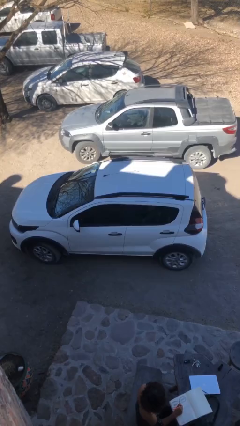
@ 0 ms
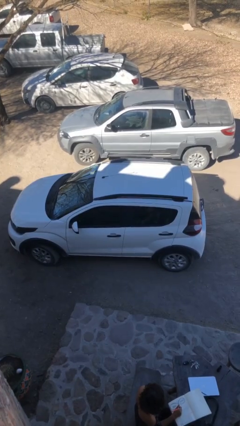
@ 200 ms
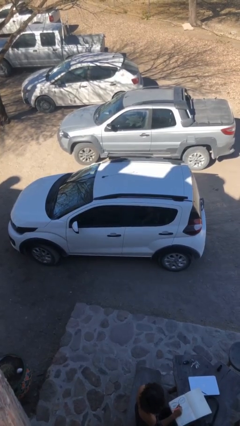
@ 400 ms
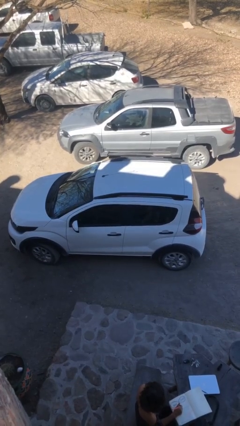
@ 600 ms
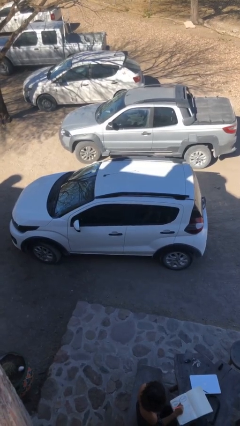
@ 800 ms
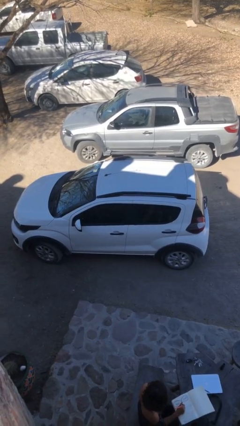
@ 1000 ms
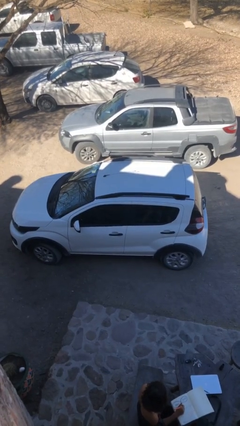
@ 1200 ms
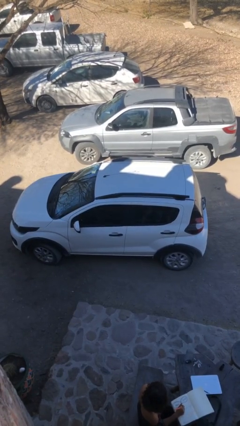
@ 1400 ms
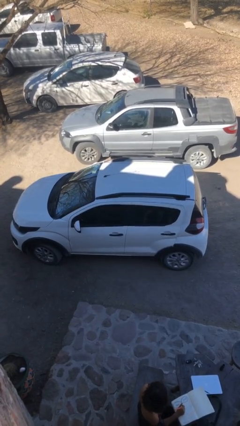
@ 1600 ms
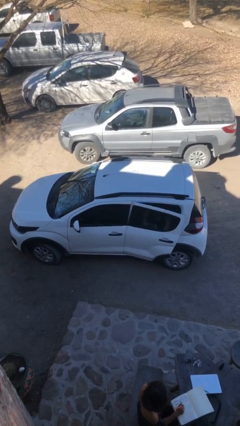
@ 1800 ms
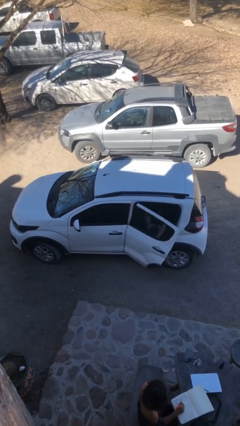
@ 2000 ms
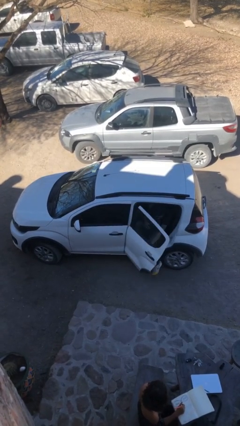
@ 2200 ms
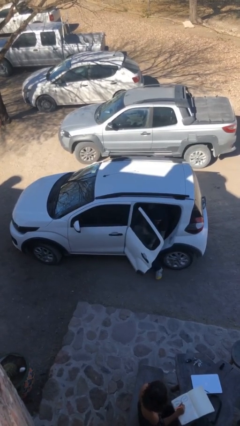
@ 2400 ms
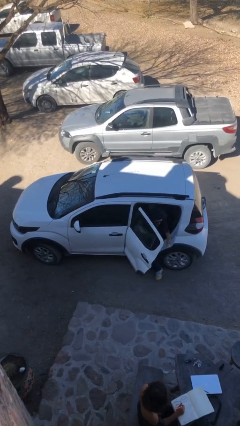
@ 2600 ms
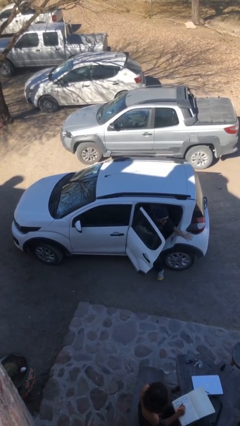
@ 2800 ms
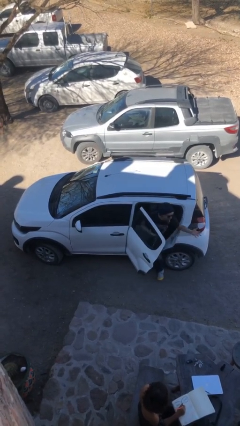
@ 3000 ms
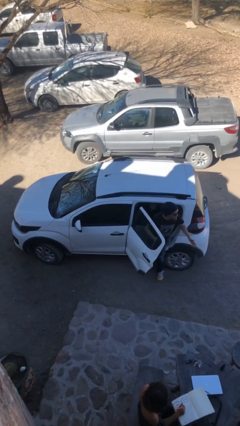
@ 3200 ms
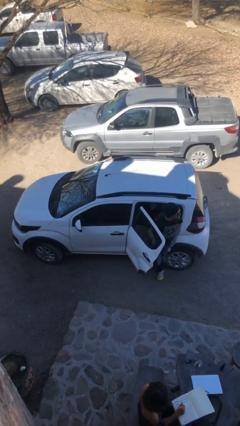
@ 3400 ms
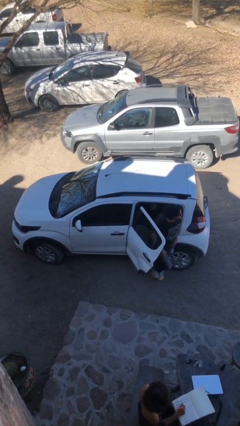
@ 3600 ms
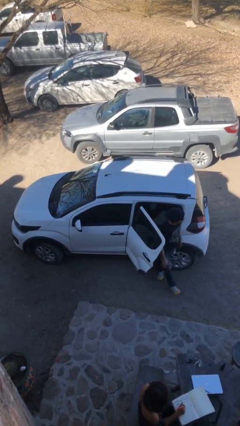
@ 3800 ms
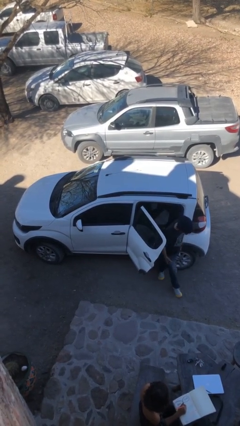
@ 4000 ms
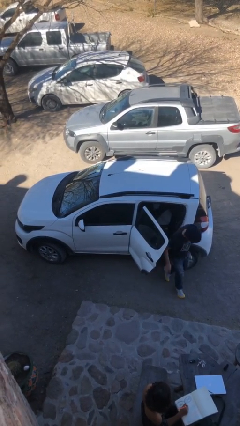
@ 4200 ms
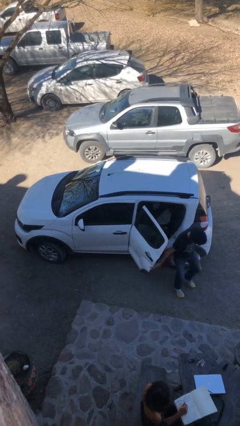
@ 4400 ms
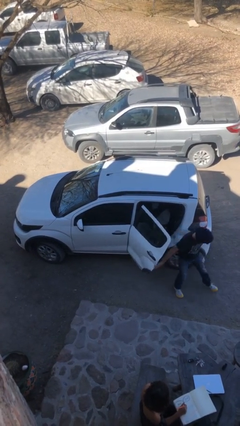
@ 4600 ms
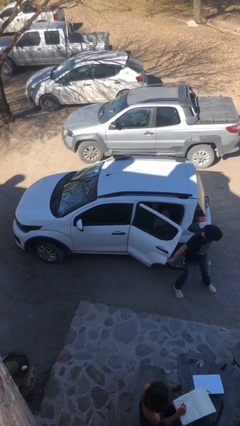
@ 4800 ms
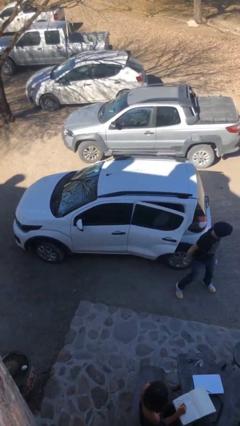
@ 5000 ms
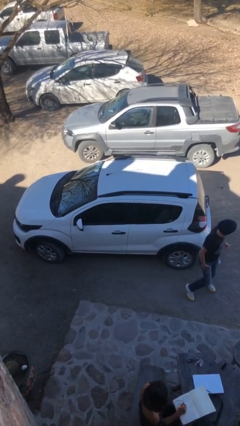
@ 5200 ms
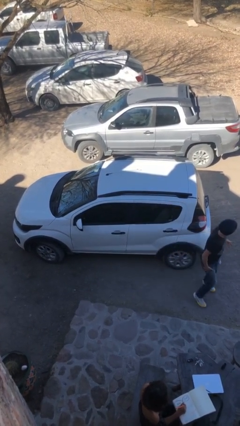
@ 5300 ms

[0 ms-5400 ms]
car drops off person

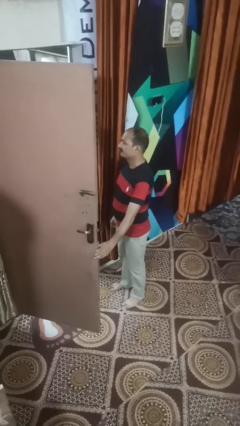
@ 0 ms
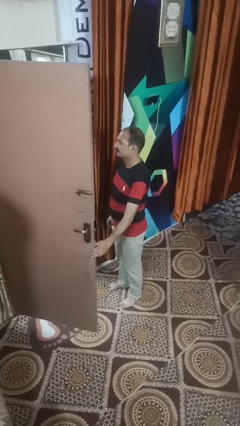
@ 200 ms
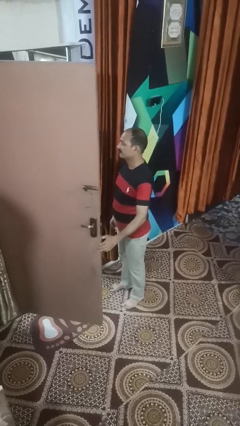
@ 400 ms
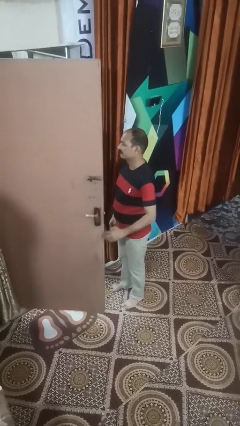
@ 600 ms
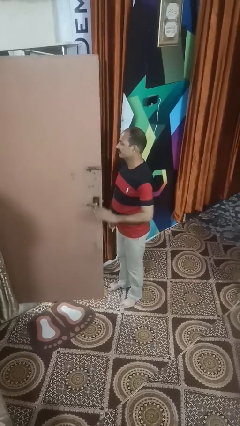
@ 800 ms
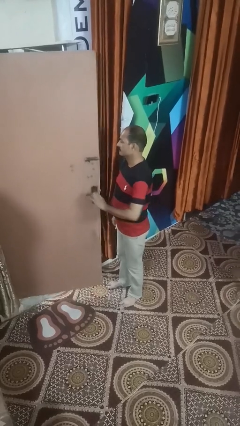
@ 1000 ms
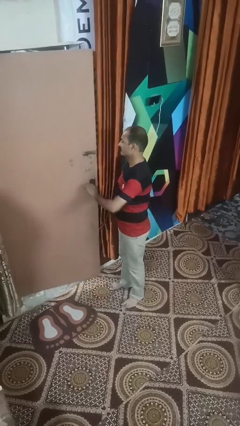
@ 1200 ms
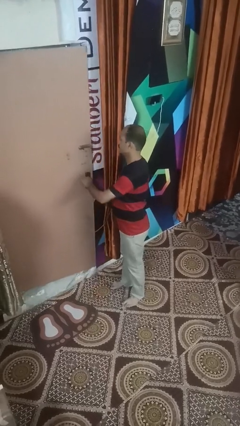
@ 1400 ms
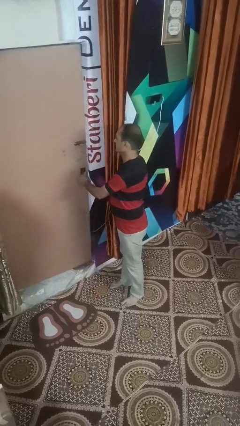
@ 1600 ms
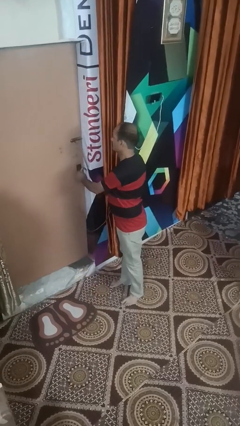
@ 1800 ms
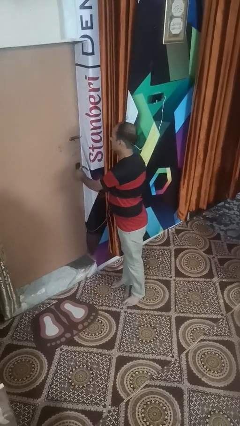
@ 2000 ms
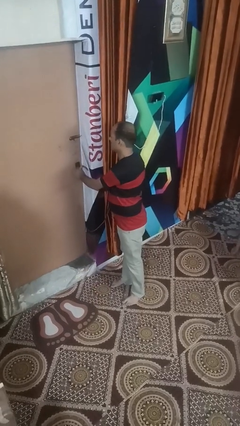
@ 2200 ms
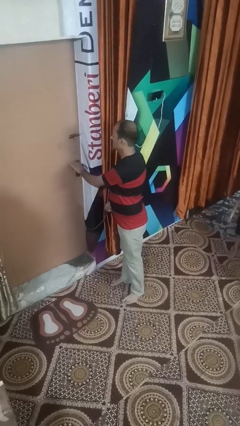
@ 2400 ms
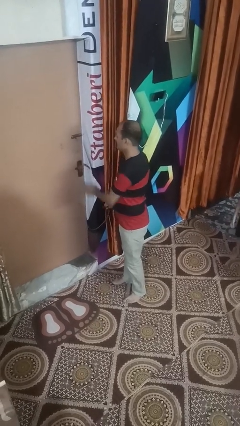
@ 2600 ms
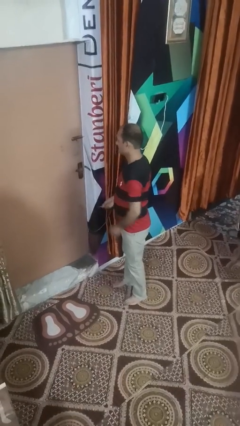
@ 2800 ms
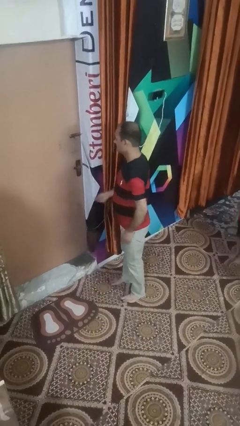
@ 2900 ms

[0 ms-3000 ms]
person closes facility door

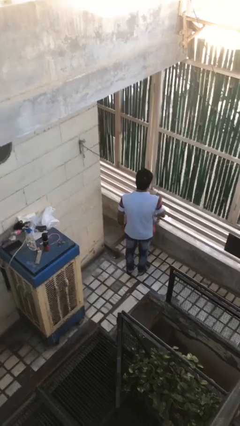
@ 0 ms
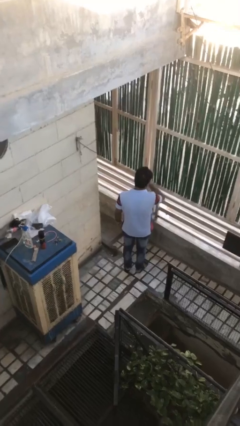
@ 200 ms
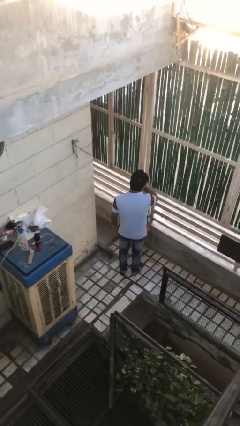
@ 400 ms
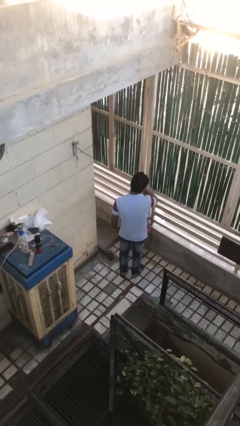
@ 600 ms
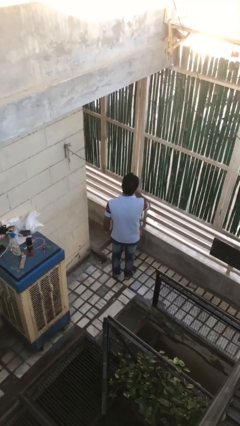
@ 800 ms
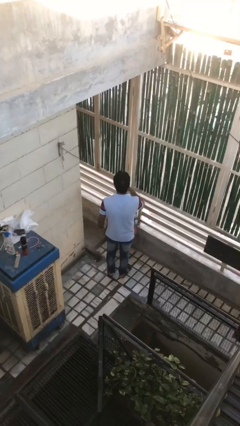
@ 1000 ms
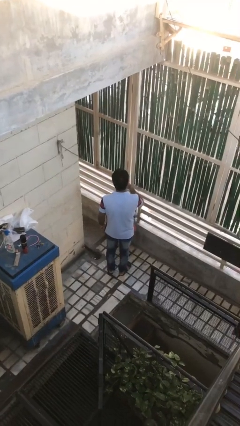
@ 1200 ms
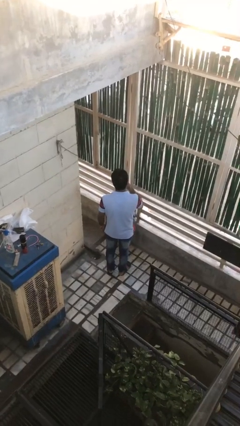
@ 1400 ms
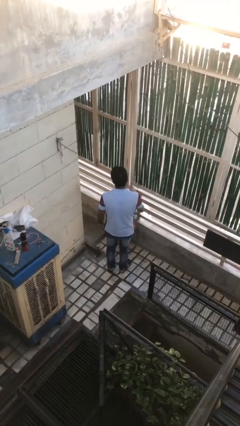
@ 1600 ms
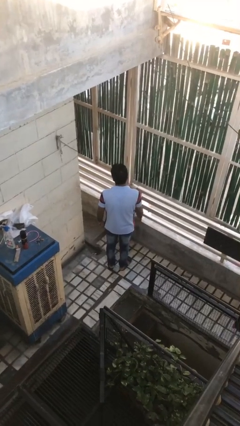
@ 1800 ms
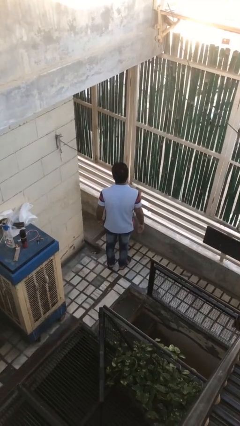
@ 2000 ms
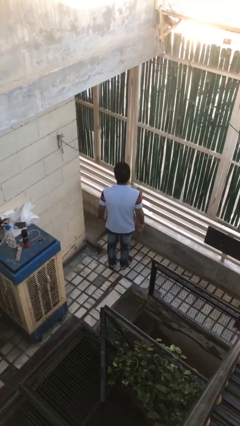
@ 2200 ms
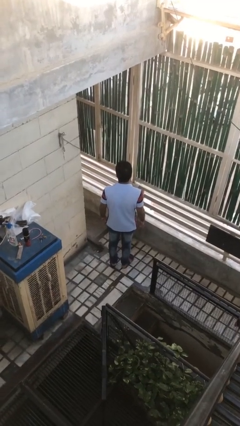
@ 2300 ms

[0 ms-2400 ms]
person licks fingers

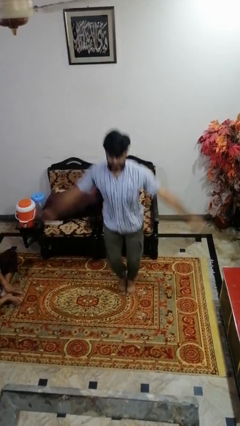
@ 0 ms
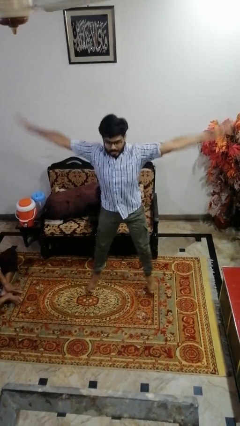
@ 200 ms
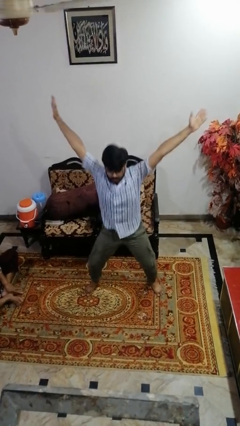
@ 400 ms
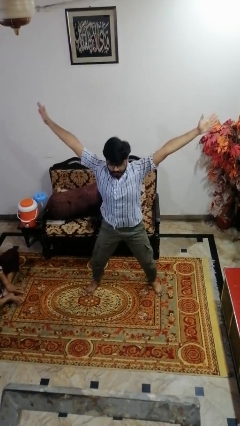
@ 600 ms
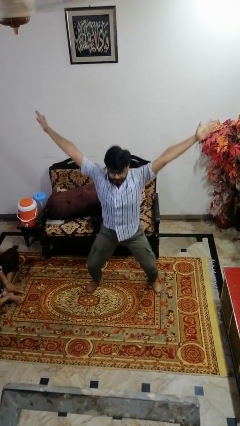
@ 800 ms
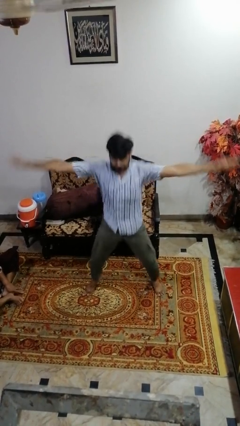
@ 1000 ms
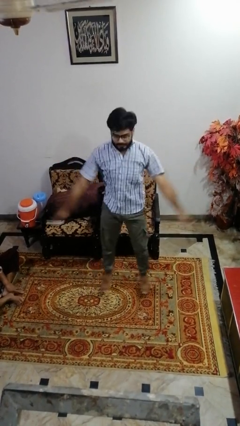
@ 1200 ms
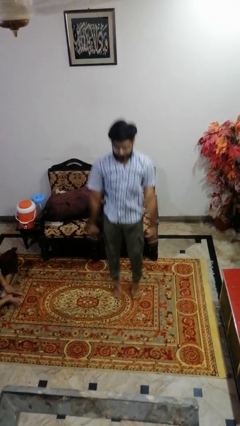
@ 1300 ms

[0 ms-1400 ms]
person exercises with jumping jacks

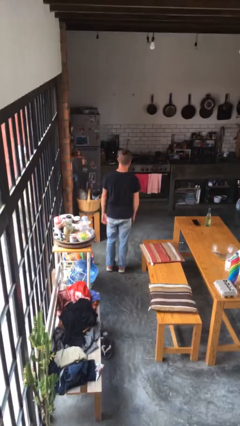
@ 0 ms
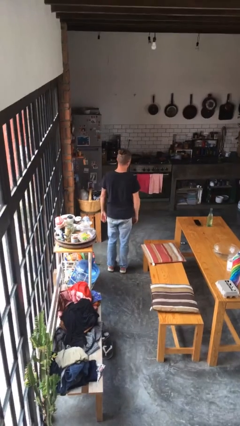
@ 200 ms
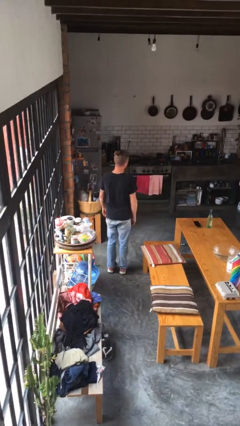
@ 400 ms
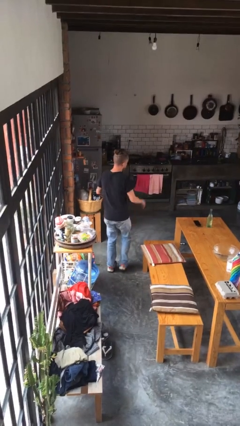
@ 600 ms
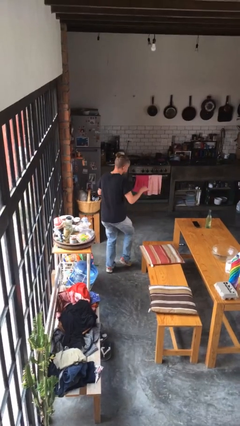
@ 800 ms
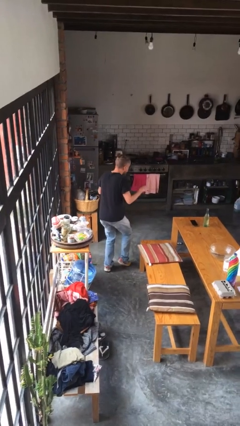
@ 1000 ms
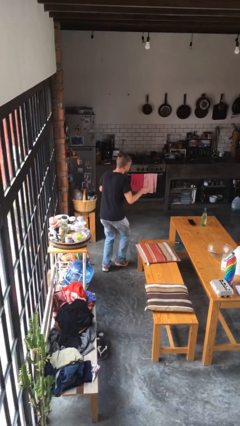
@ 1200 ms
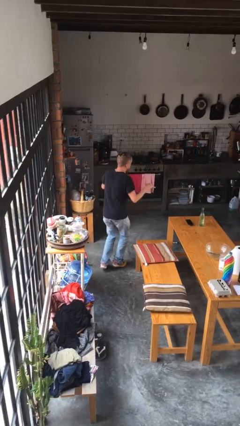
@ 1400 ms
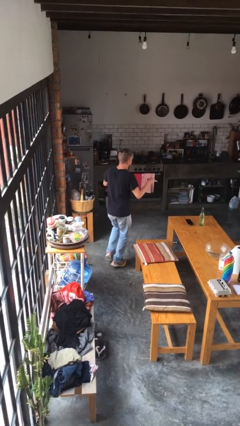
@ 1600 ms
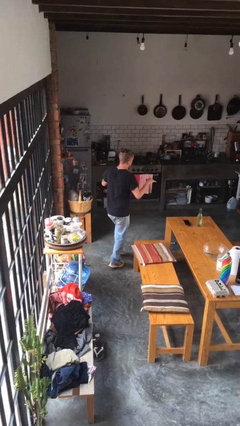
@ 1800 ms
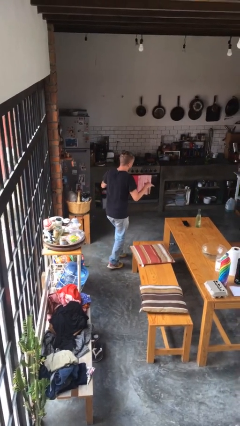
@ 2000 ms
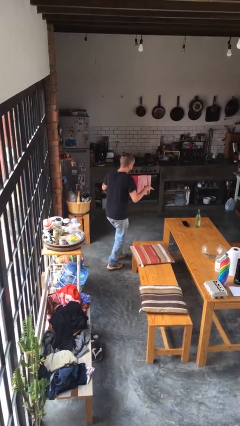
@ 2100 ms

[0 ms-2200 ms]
person walks tiptoe

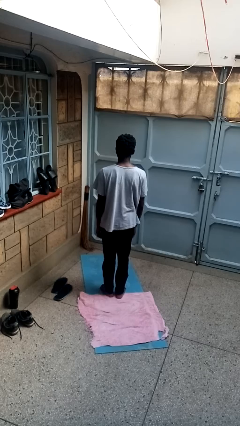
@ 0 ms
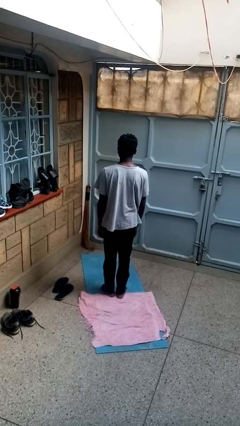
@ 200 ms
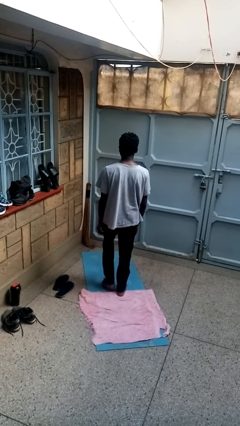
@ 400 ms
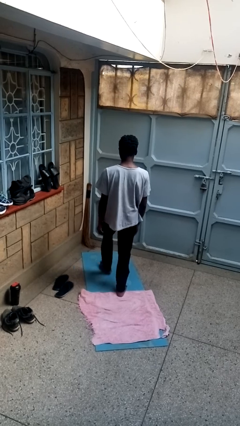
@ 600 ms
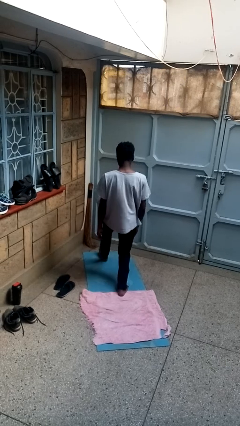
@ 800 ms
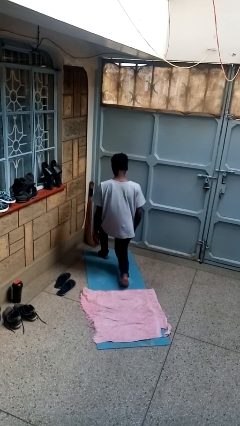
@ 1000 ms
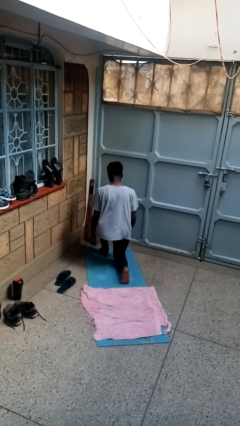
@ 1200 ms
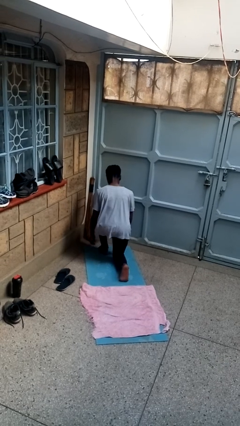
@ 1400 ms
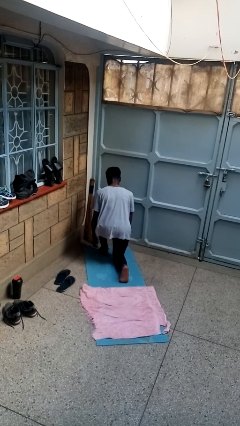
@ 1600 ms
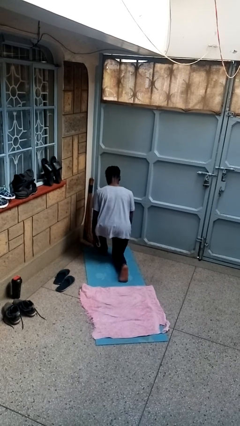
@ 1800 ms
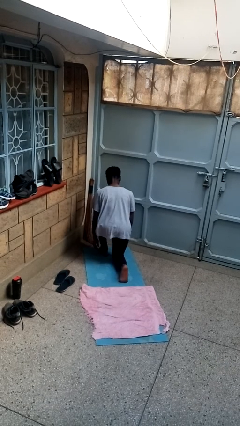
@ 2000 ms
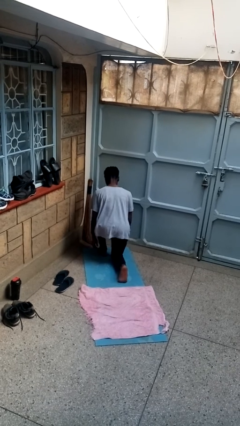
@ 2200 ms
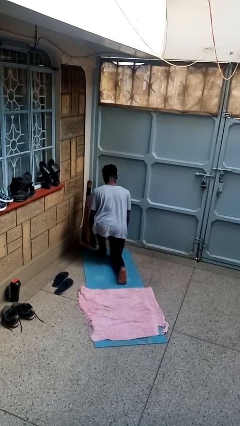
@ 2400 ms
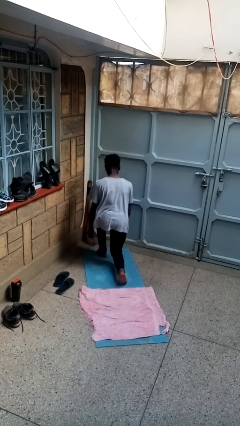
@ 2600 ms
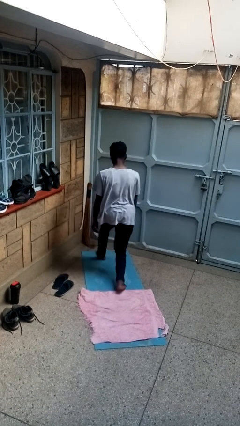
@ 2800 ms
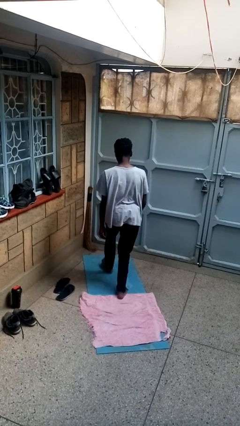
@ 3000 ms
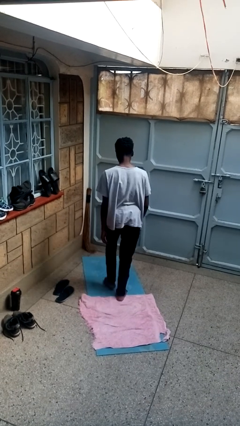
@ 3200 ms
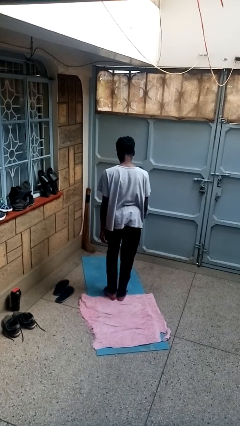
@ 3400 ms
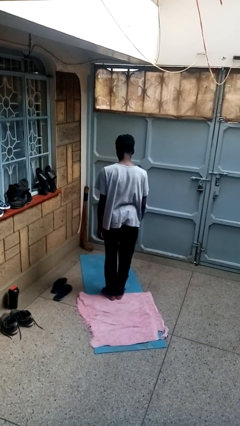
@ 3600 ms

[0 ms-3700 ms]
person exercises with lunges
